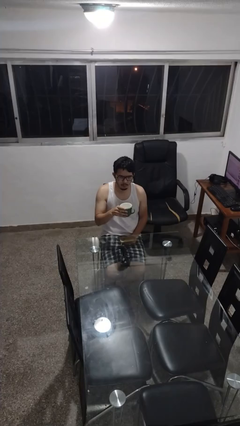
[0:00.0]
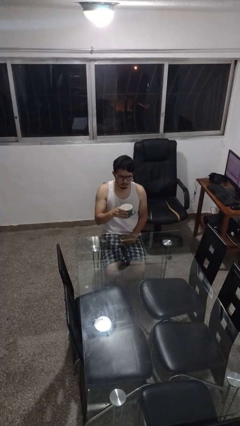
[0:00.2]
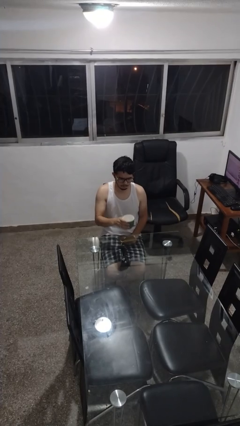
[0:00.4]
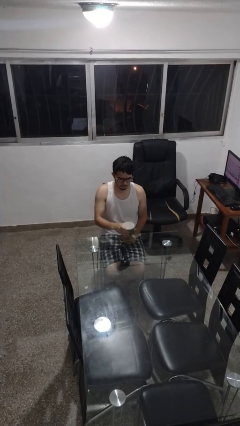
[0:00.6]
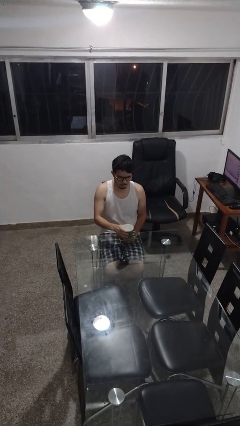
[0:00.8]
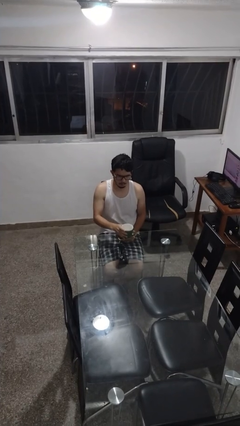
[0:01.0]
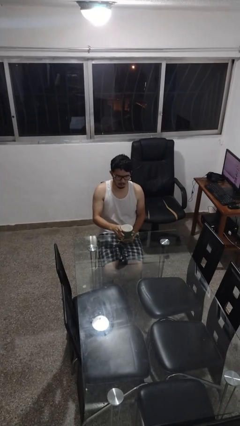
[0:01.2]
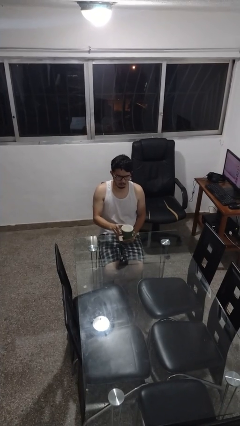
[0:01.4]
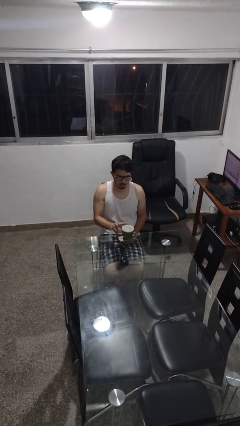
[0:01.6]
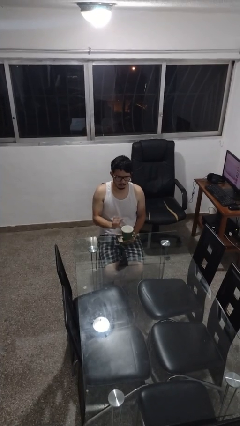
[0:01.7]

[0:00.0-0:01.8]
person puts down object on table

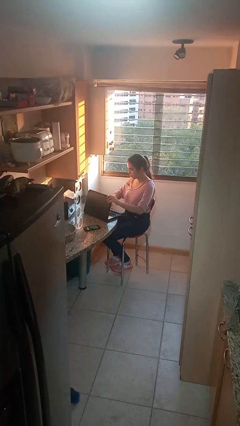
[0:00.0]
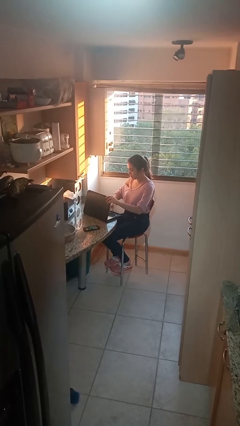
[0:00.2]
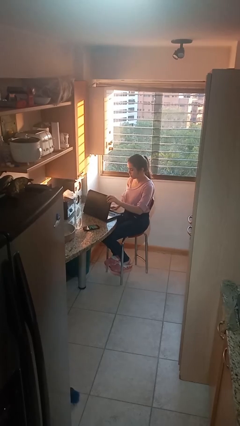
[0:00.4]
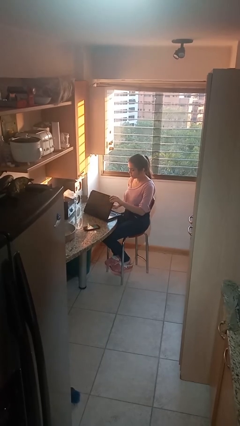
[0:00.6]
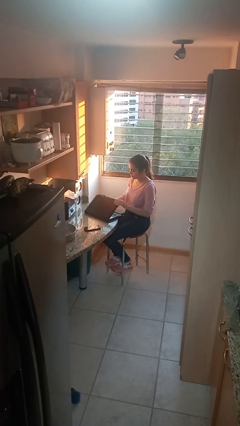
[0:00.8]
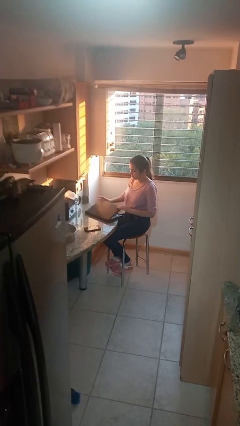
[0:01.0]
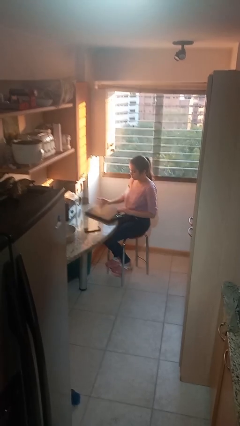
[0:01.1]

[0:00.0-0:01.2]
person interacts with laptop

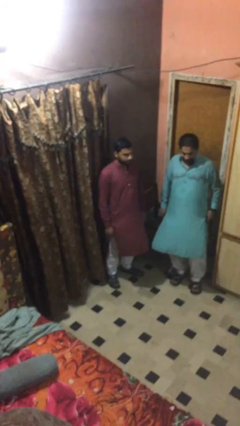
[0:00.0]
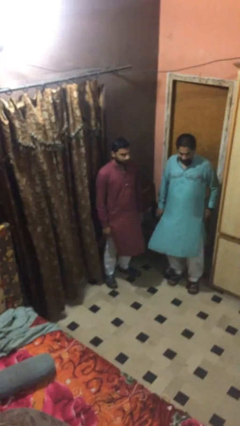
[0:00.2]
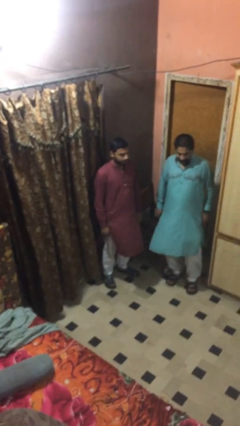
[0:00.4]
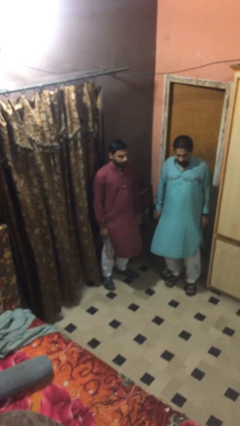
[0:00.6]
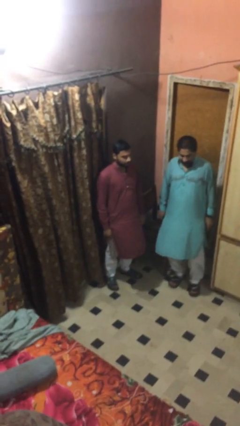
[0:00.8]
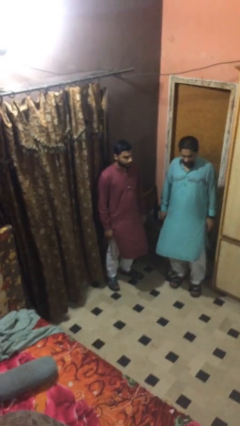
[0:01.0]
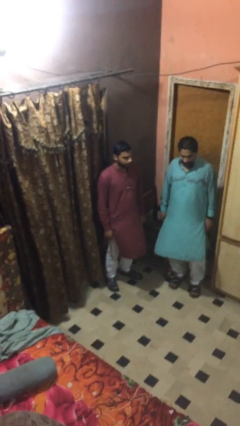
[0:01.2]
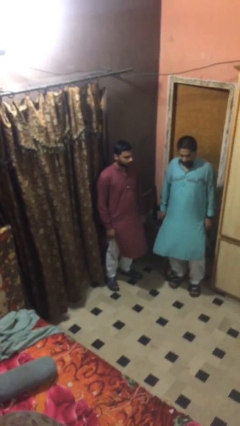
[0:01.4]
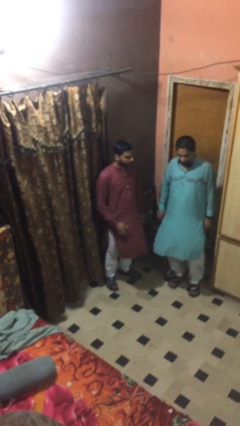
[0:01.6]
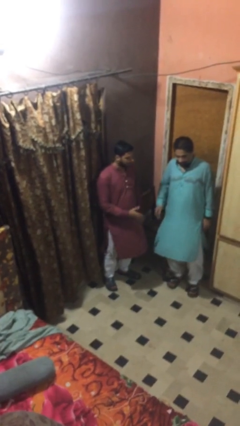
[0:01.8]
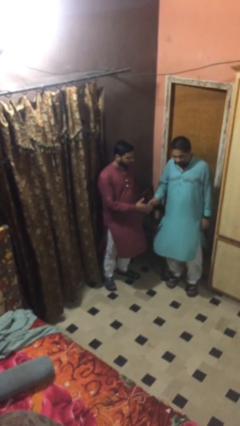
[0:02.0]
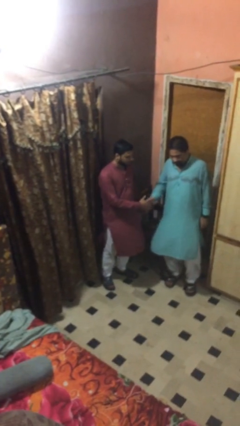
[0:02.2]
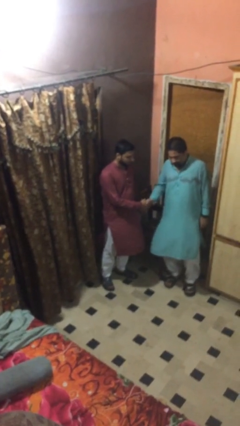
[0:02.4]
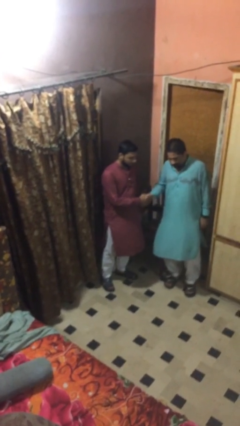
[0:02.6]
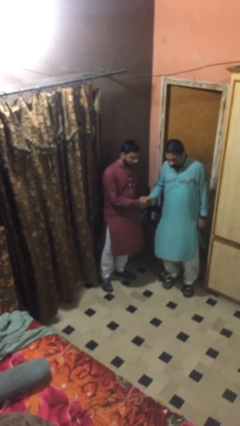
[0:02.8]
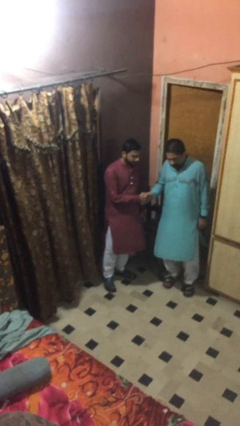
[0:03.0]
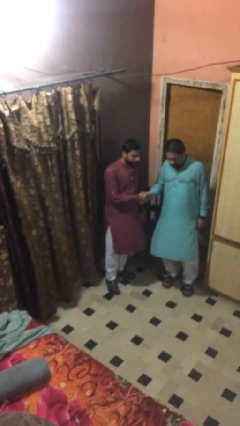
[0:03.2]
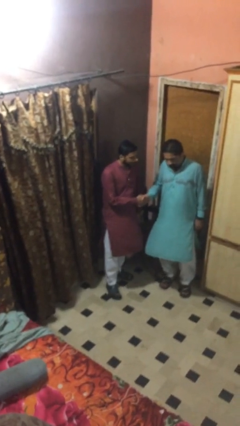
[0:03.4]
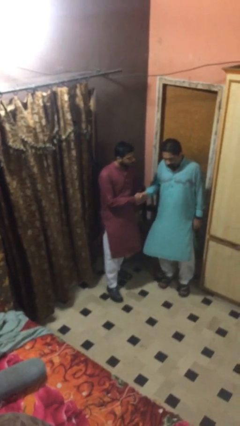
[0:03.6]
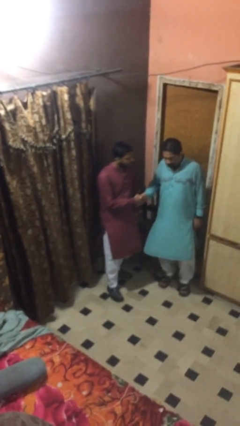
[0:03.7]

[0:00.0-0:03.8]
person shakes hand

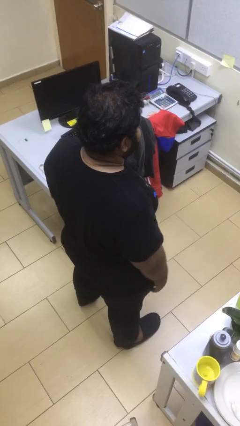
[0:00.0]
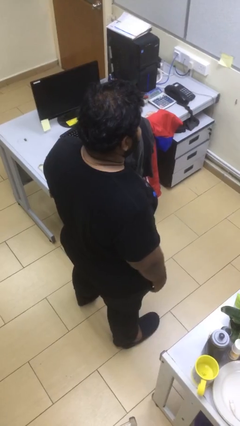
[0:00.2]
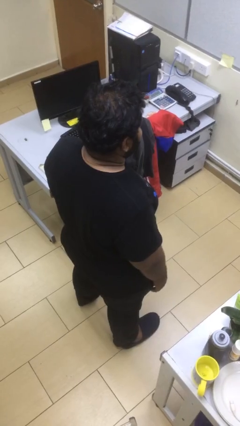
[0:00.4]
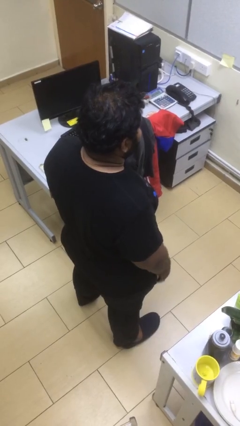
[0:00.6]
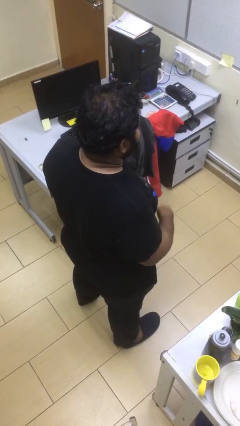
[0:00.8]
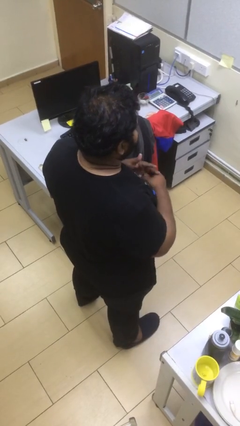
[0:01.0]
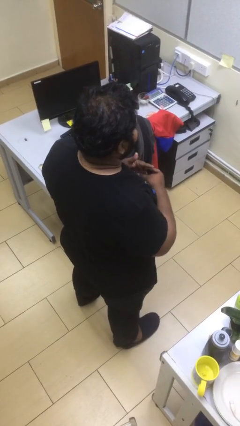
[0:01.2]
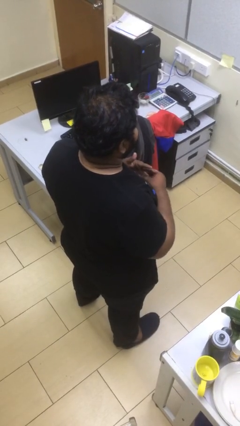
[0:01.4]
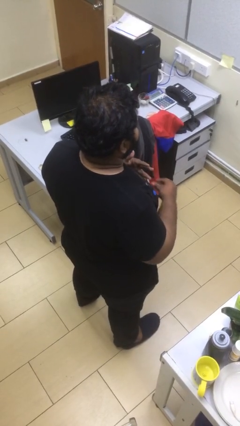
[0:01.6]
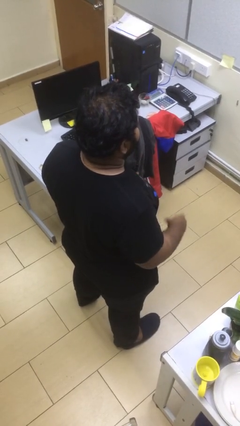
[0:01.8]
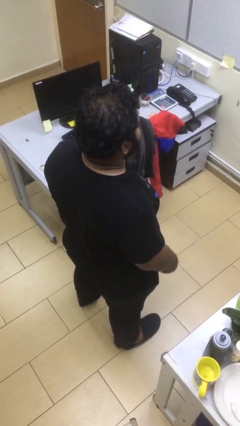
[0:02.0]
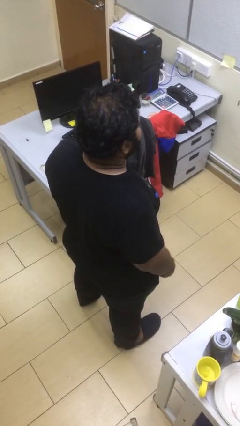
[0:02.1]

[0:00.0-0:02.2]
person takes off ring

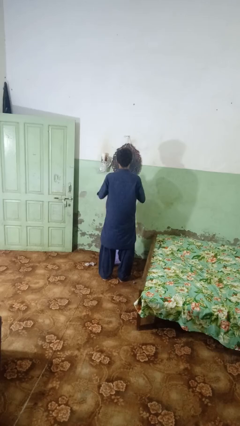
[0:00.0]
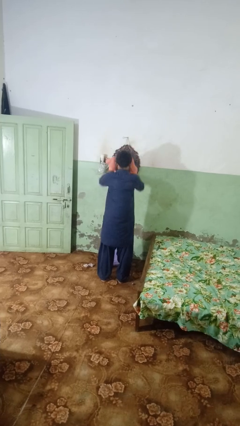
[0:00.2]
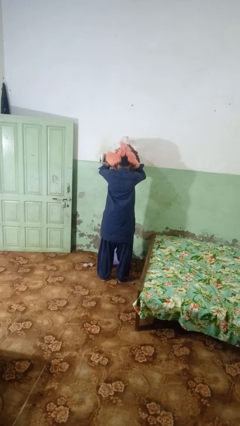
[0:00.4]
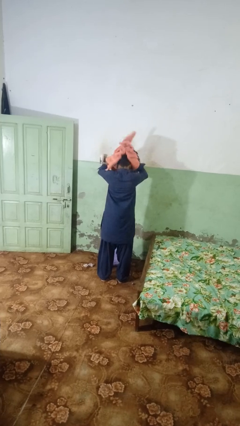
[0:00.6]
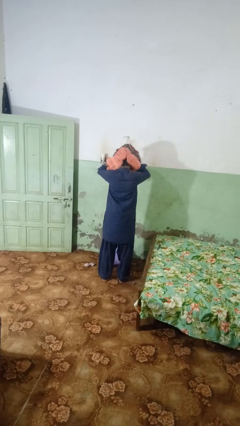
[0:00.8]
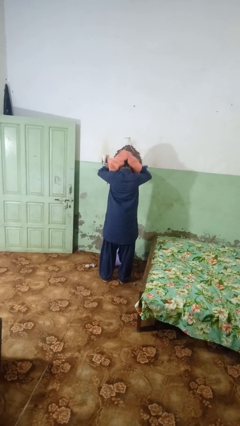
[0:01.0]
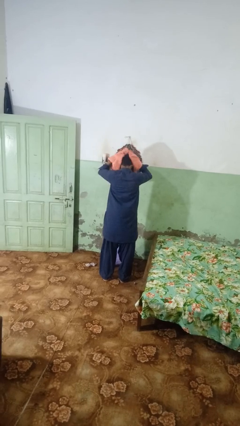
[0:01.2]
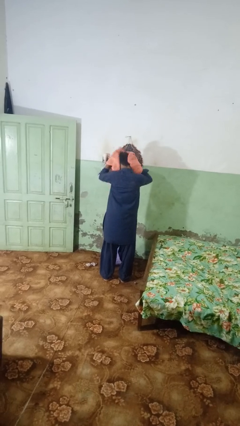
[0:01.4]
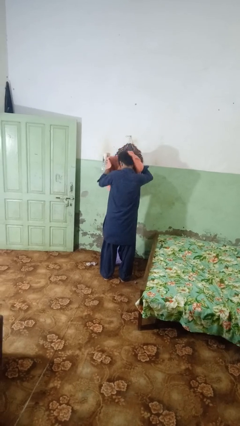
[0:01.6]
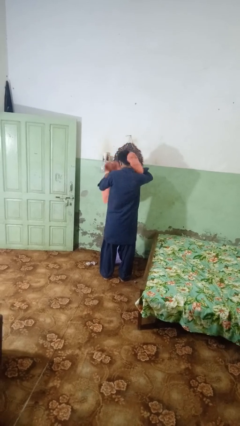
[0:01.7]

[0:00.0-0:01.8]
person dries hair with towel

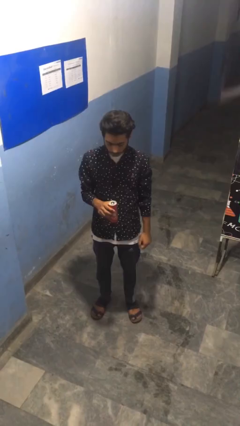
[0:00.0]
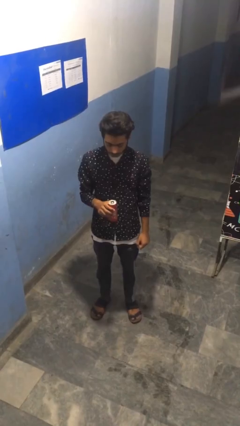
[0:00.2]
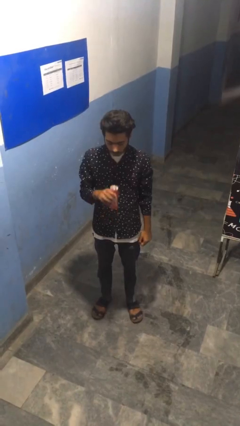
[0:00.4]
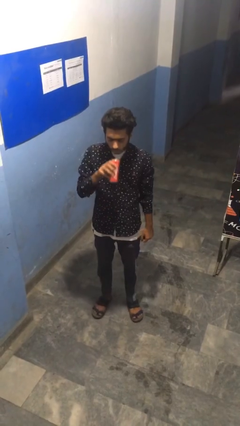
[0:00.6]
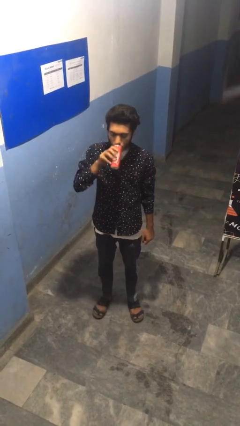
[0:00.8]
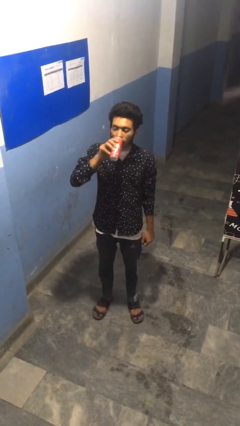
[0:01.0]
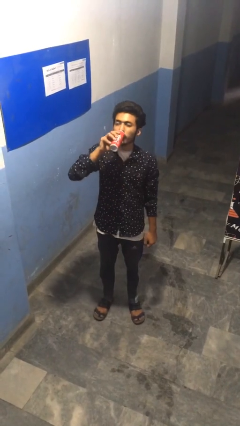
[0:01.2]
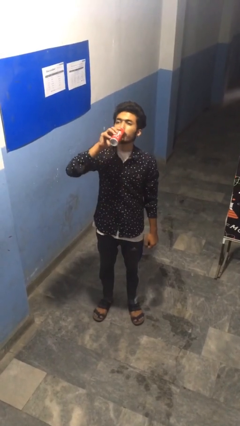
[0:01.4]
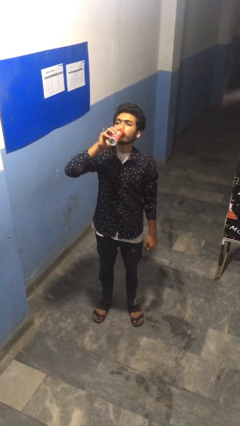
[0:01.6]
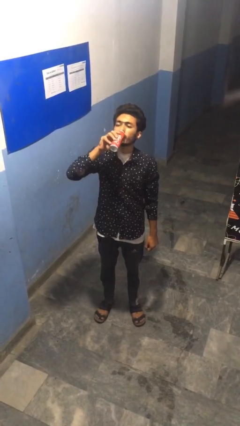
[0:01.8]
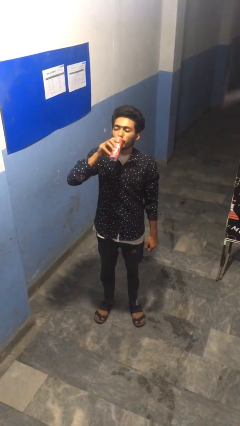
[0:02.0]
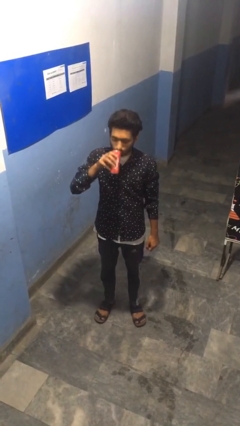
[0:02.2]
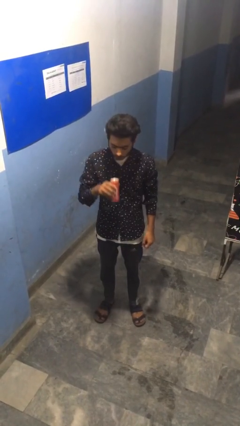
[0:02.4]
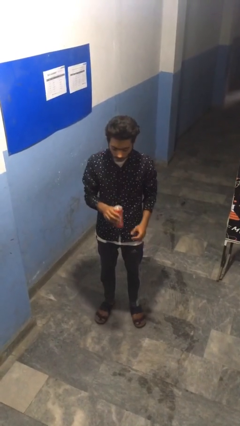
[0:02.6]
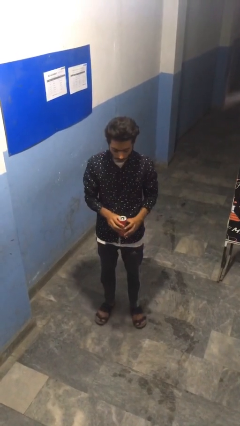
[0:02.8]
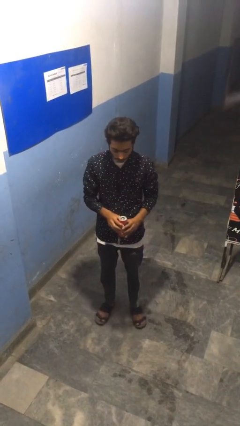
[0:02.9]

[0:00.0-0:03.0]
person drinks from beverage can

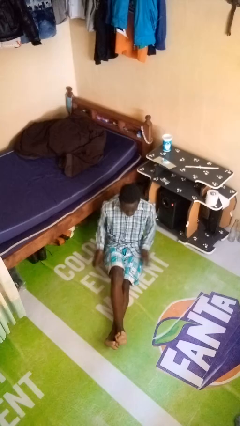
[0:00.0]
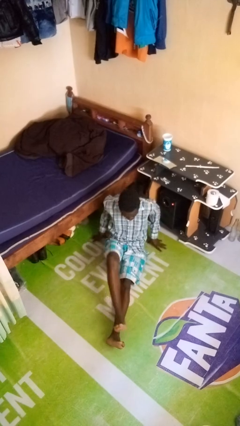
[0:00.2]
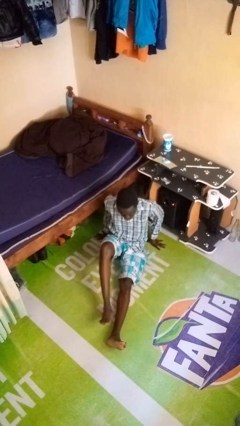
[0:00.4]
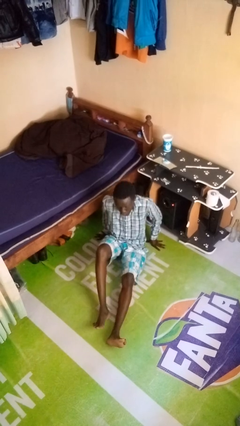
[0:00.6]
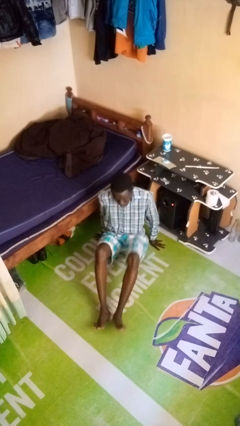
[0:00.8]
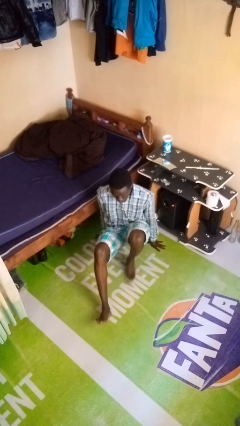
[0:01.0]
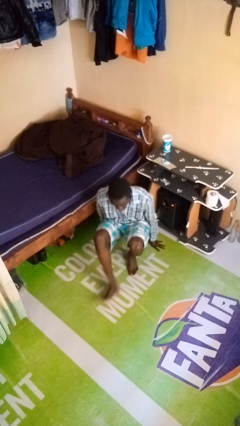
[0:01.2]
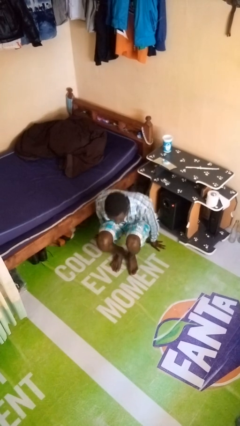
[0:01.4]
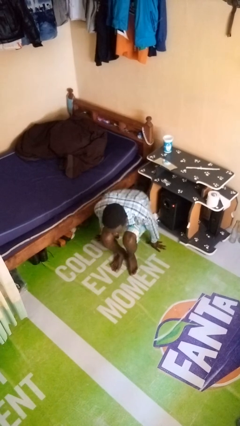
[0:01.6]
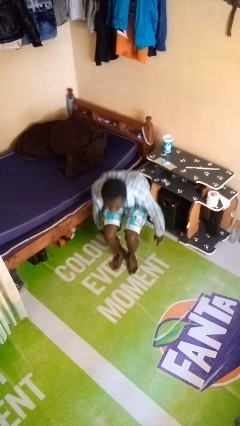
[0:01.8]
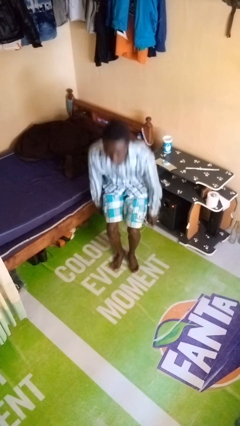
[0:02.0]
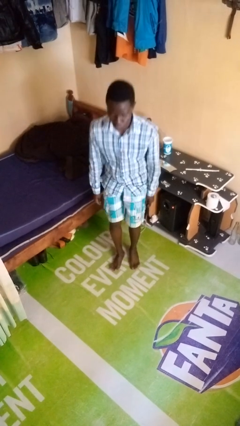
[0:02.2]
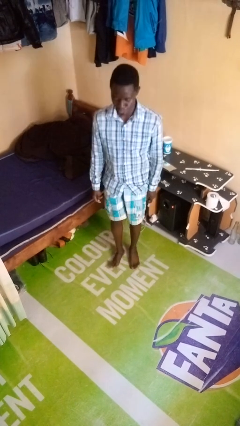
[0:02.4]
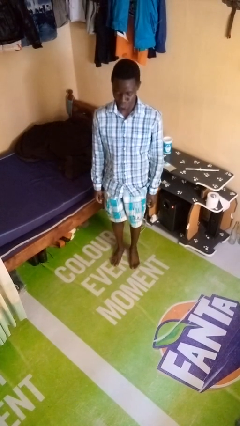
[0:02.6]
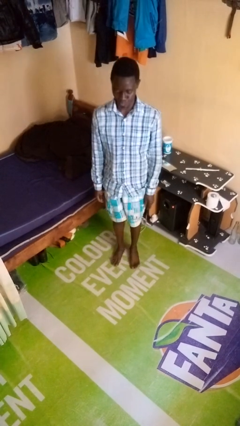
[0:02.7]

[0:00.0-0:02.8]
person stands up from floor

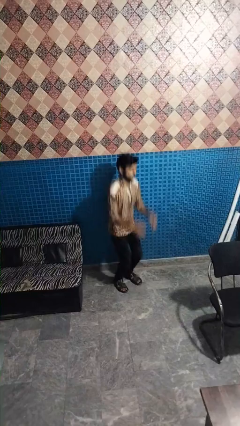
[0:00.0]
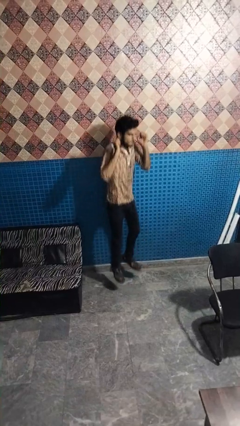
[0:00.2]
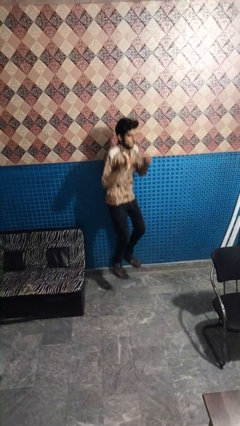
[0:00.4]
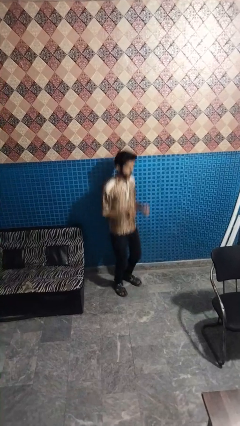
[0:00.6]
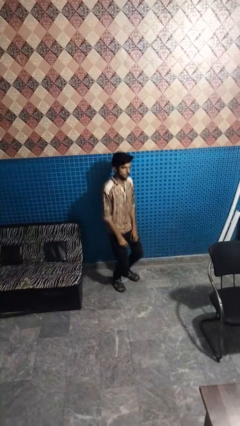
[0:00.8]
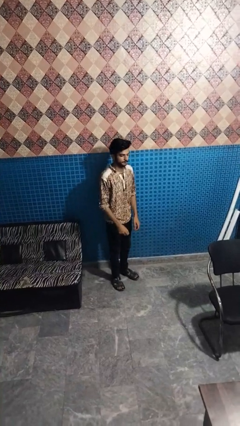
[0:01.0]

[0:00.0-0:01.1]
person jumps
